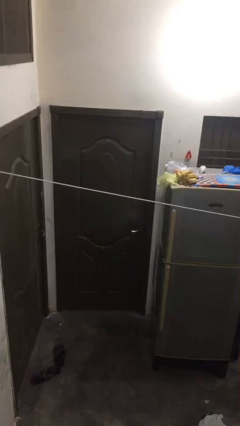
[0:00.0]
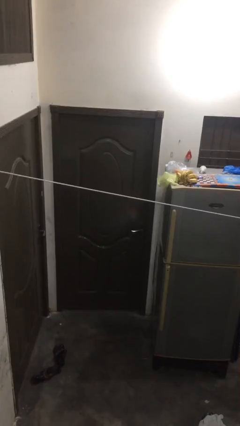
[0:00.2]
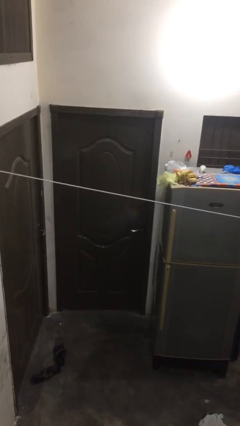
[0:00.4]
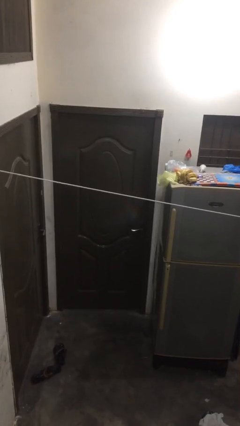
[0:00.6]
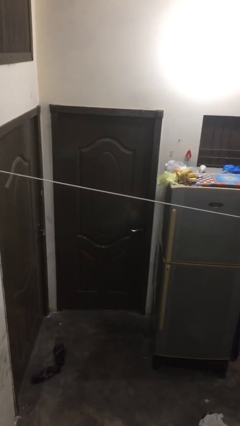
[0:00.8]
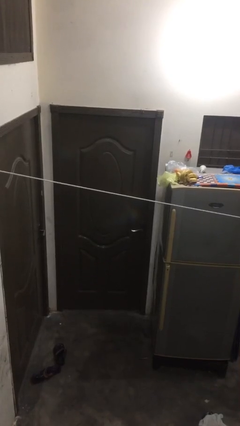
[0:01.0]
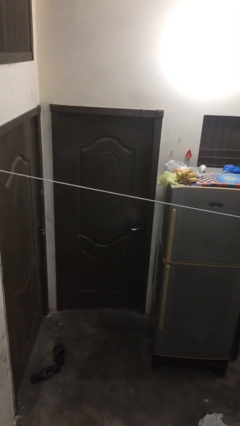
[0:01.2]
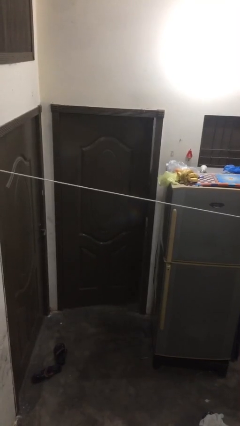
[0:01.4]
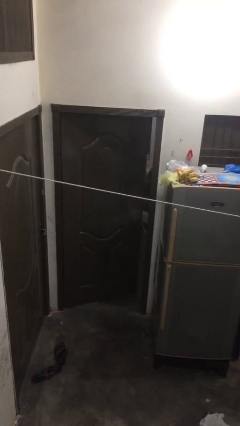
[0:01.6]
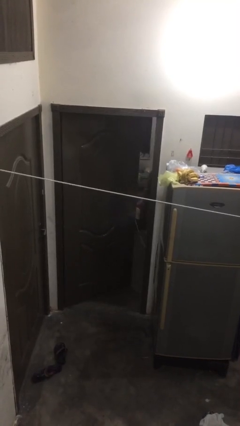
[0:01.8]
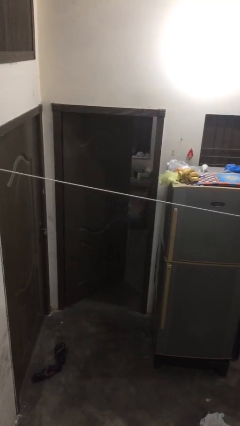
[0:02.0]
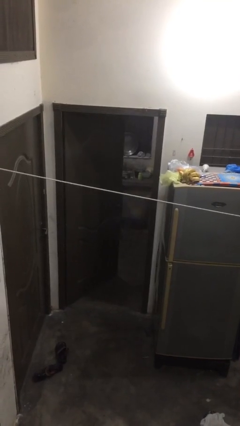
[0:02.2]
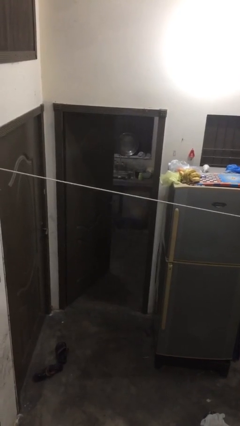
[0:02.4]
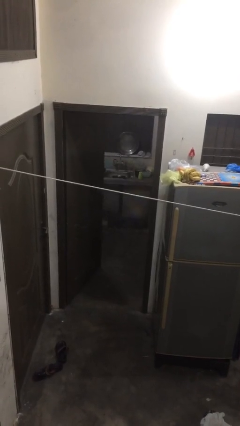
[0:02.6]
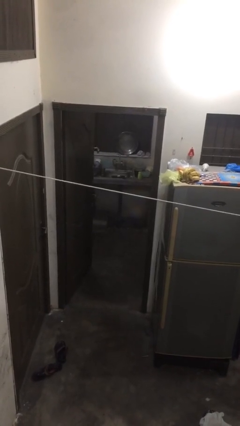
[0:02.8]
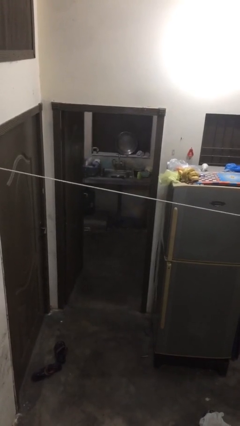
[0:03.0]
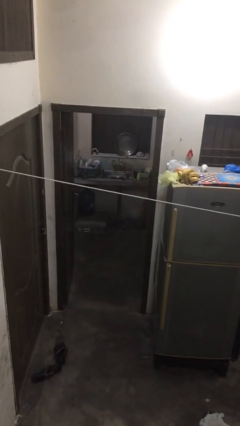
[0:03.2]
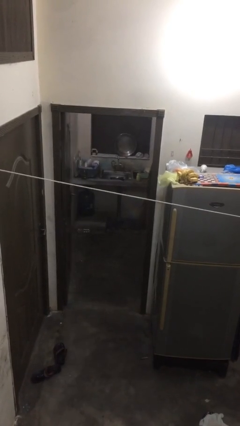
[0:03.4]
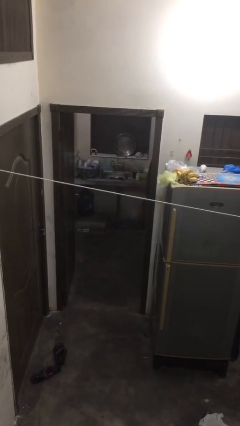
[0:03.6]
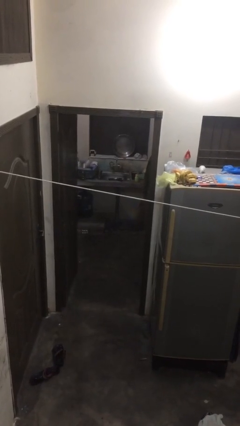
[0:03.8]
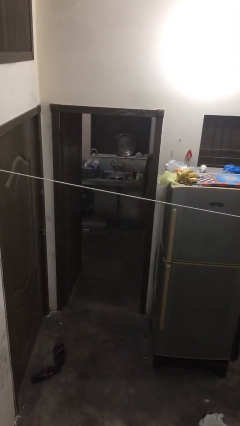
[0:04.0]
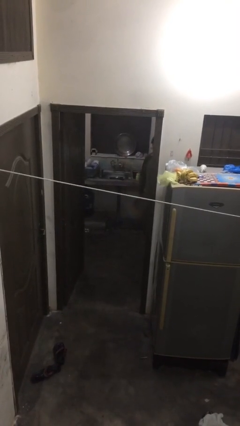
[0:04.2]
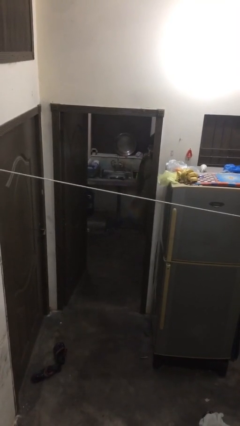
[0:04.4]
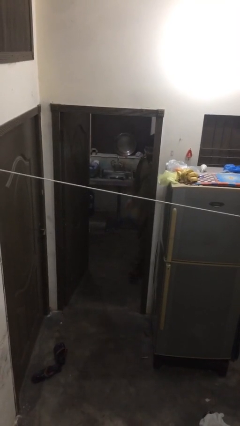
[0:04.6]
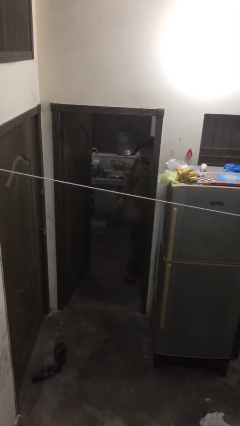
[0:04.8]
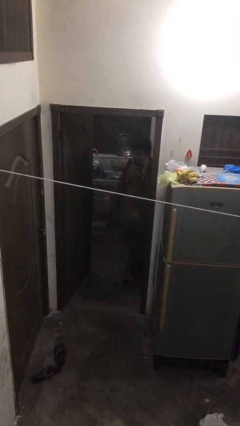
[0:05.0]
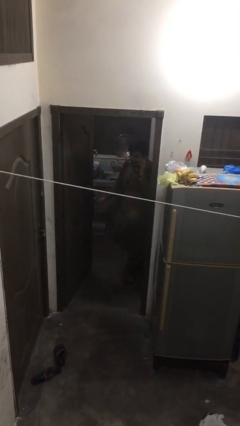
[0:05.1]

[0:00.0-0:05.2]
person opens facility door

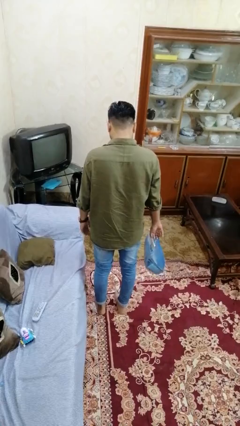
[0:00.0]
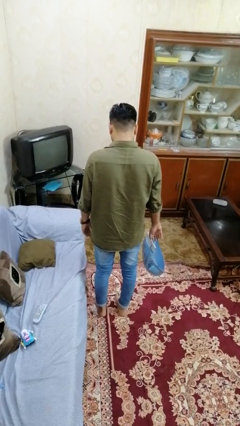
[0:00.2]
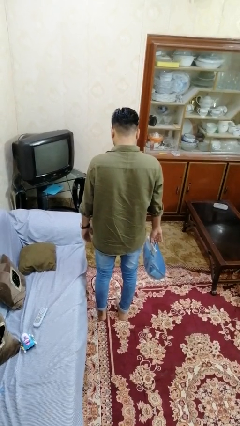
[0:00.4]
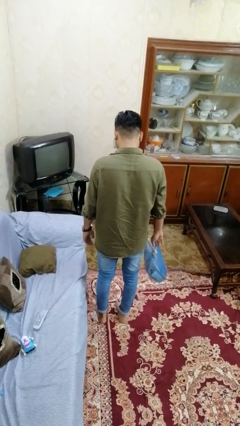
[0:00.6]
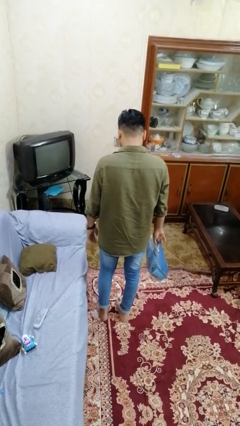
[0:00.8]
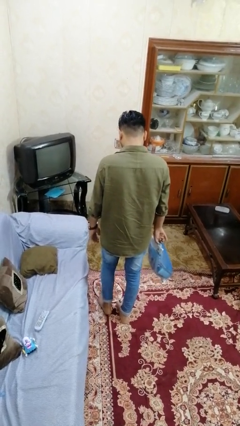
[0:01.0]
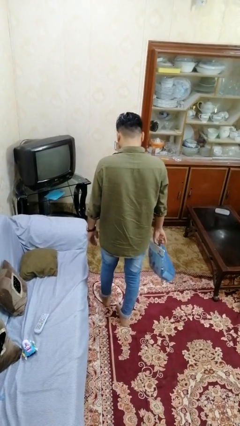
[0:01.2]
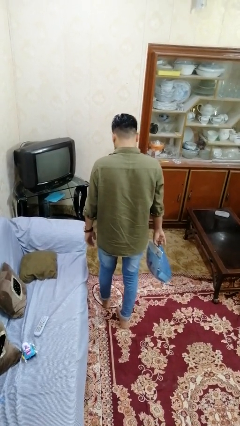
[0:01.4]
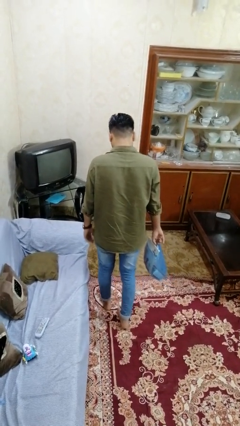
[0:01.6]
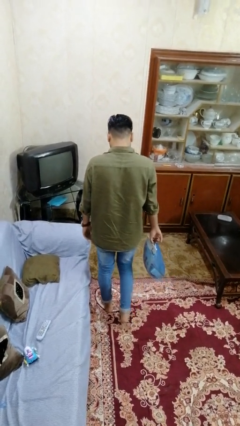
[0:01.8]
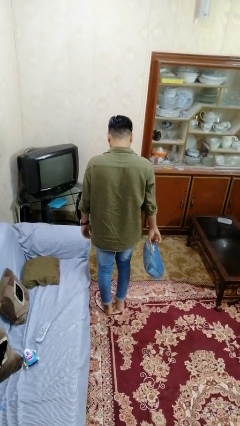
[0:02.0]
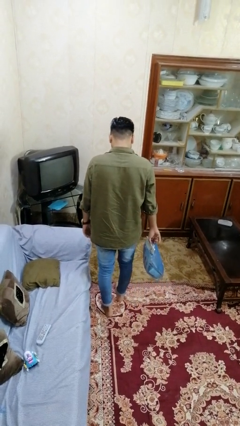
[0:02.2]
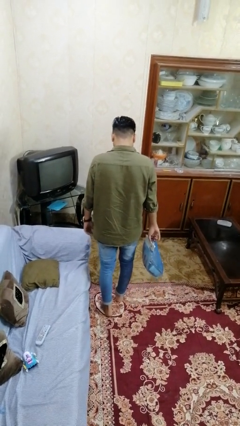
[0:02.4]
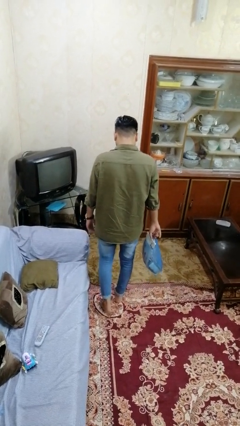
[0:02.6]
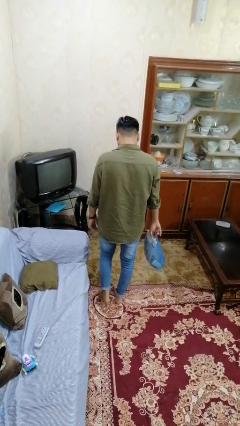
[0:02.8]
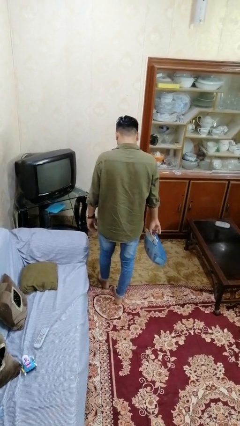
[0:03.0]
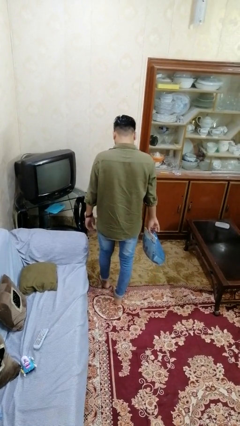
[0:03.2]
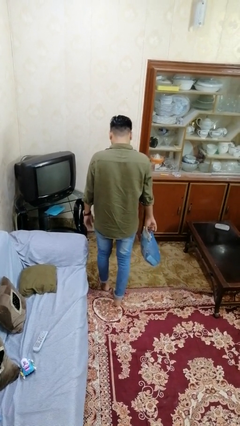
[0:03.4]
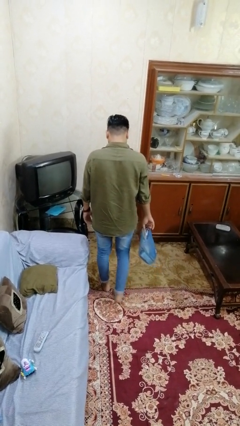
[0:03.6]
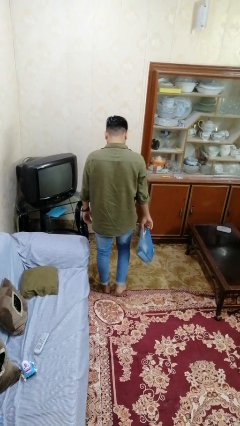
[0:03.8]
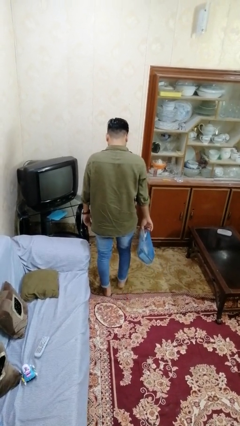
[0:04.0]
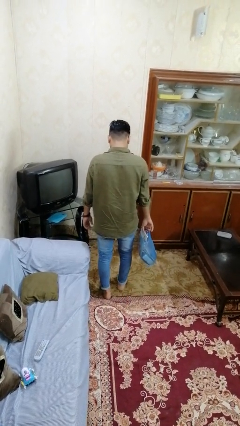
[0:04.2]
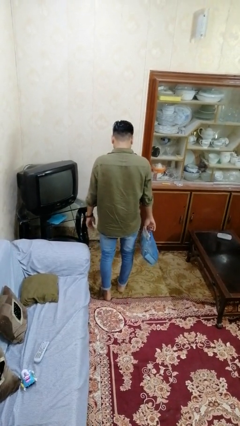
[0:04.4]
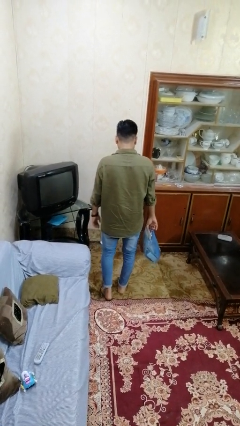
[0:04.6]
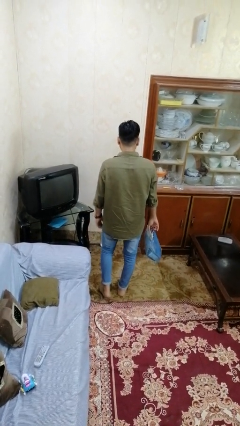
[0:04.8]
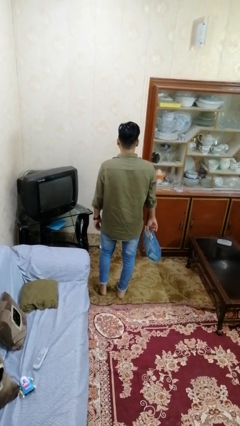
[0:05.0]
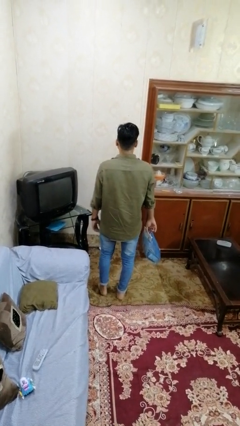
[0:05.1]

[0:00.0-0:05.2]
person carries groceries

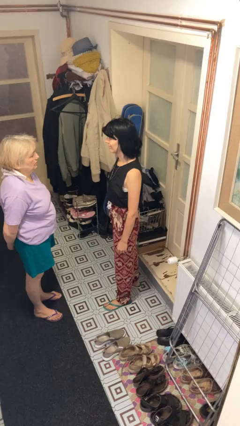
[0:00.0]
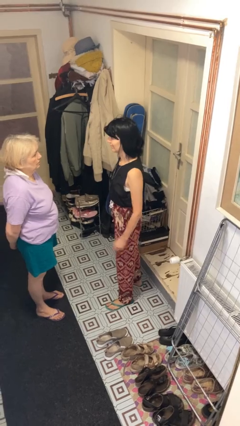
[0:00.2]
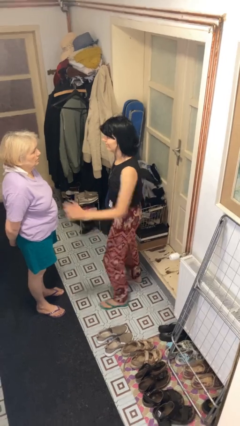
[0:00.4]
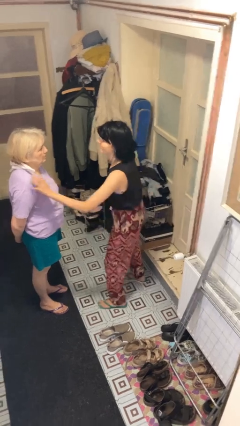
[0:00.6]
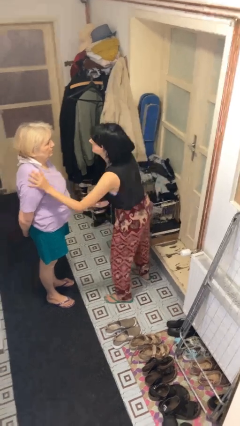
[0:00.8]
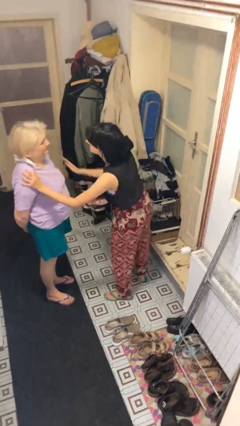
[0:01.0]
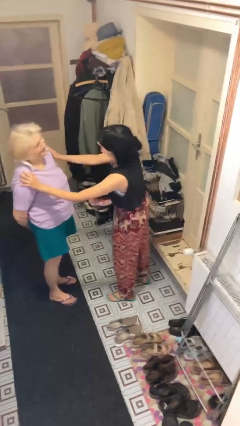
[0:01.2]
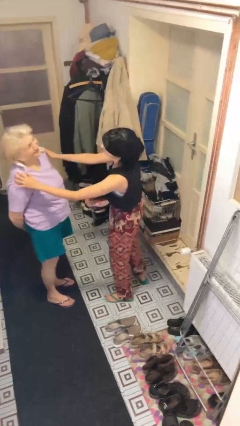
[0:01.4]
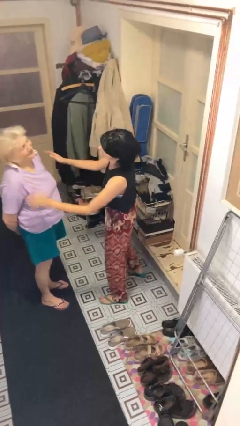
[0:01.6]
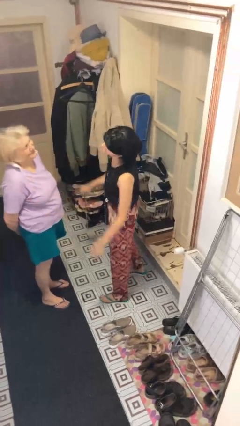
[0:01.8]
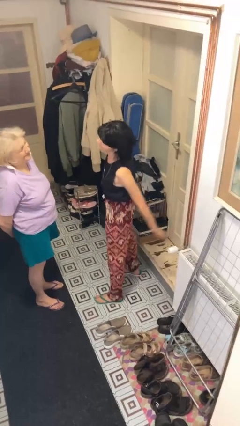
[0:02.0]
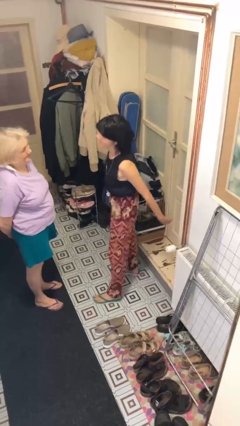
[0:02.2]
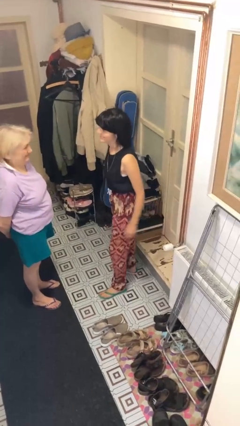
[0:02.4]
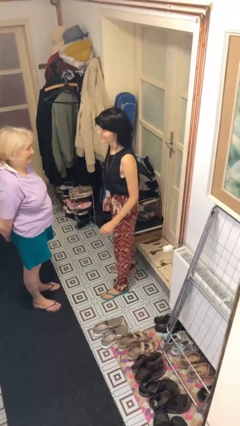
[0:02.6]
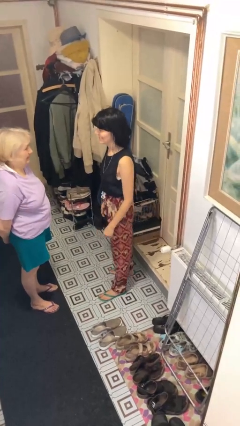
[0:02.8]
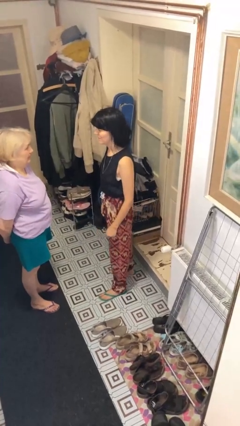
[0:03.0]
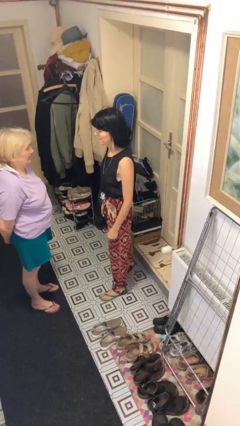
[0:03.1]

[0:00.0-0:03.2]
person shoves person

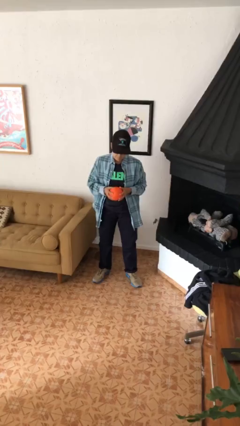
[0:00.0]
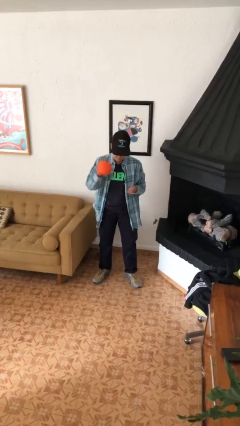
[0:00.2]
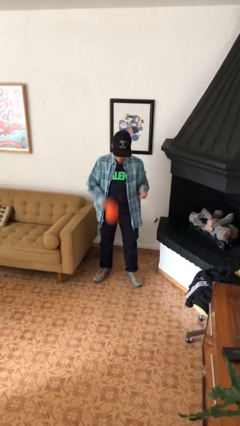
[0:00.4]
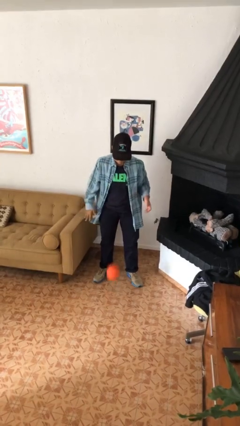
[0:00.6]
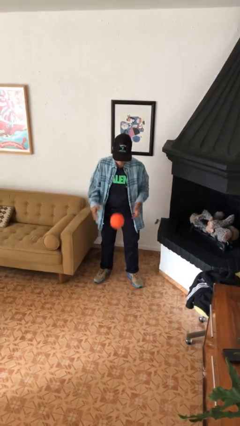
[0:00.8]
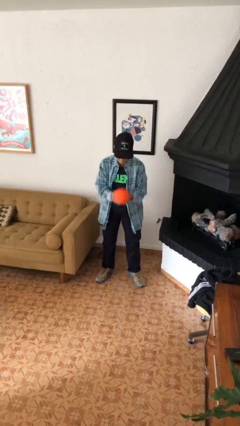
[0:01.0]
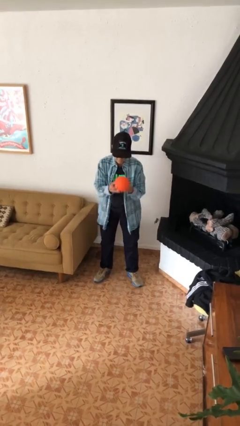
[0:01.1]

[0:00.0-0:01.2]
person bounces ball on floor

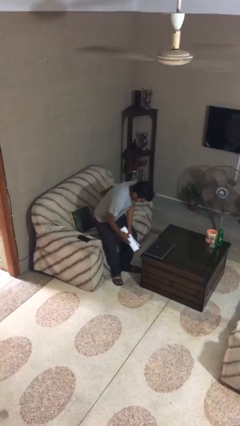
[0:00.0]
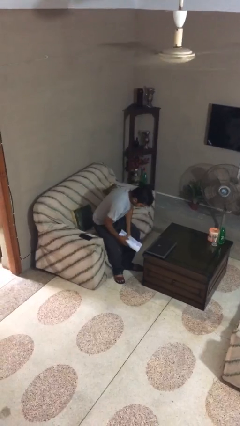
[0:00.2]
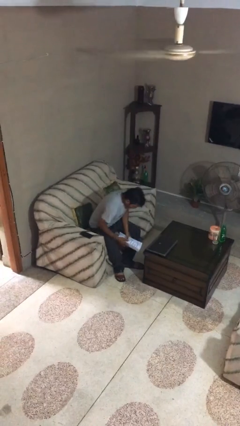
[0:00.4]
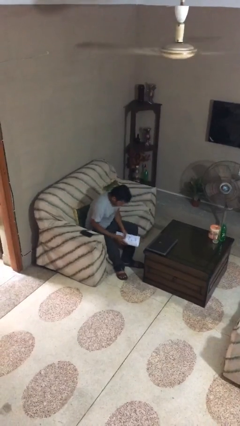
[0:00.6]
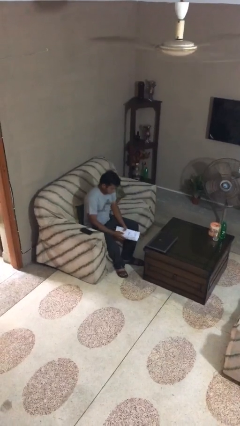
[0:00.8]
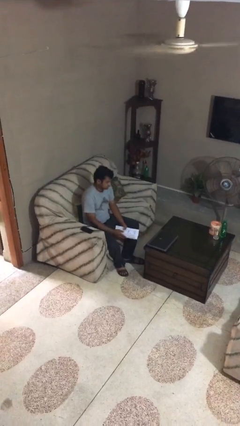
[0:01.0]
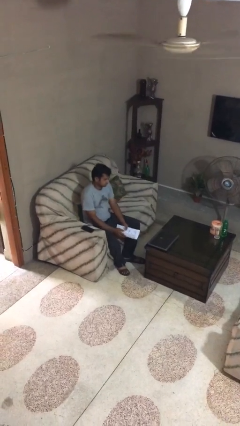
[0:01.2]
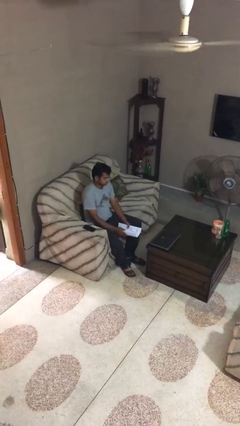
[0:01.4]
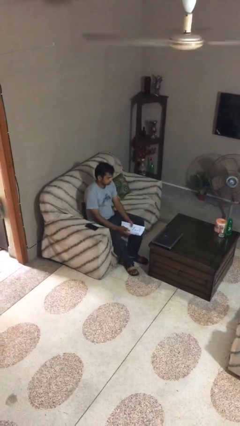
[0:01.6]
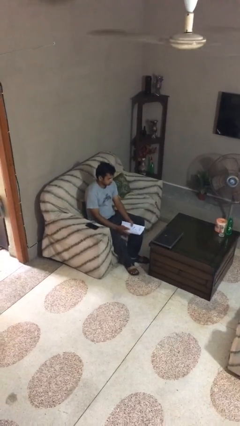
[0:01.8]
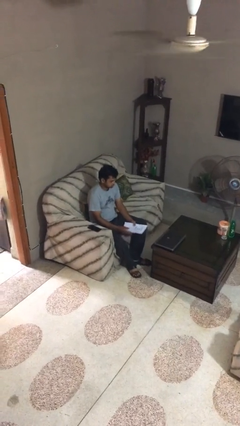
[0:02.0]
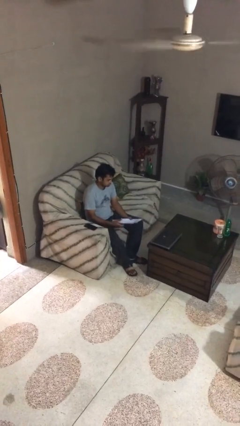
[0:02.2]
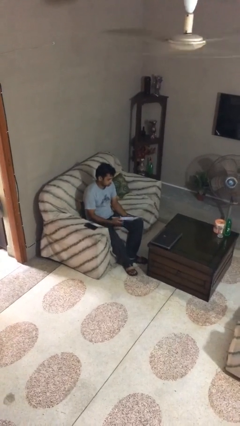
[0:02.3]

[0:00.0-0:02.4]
person sits down

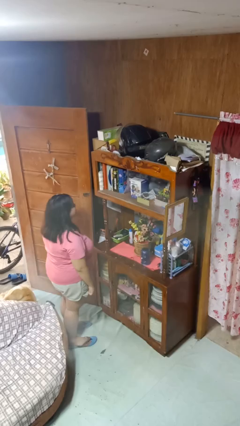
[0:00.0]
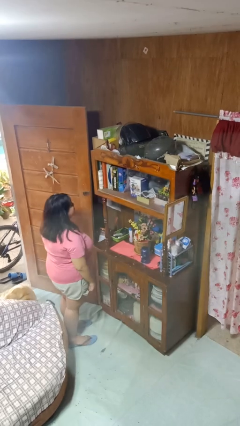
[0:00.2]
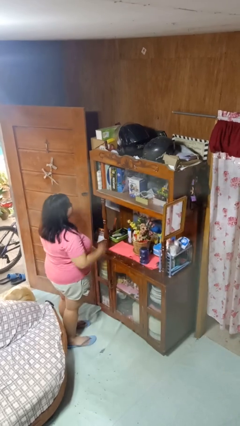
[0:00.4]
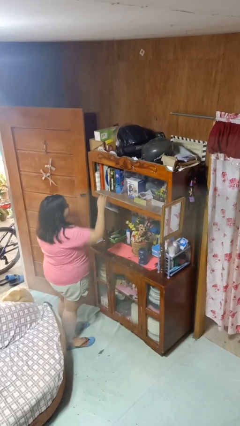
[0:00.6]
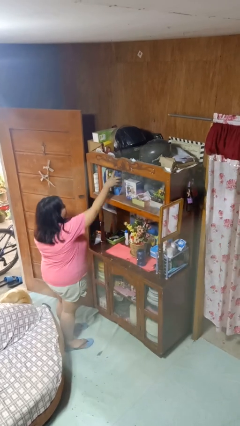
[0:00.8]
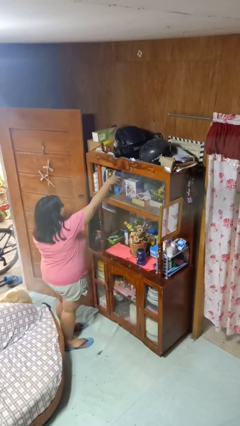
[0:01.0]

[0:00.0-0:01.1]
person picks up object from shelf
